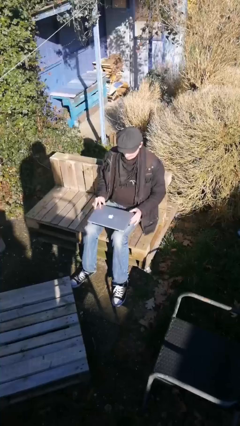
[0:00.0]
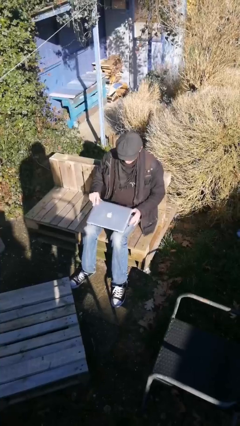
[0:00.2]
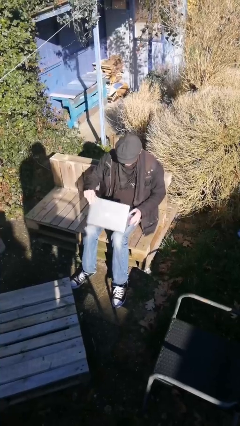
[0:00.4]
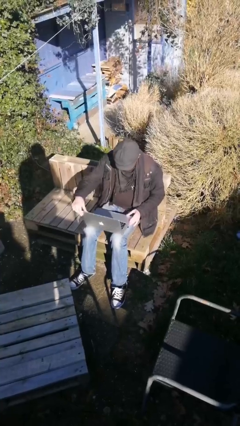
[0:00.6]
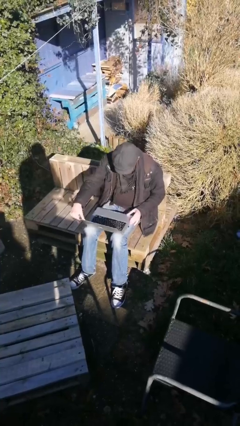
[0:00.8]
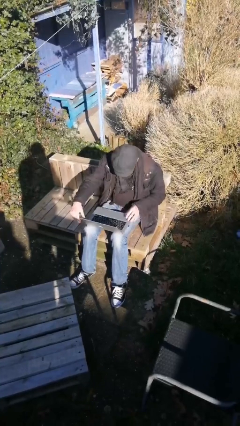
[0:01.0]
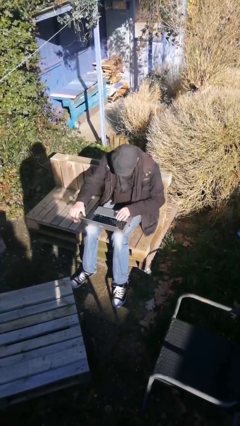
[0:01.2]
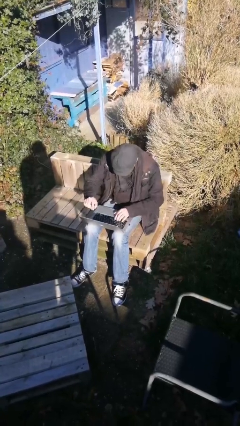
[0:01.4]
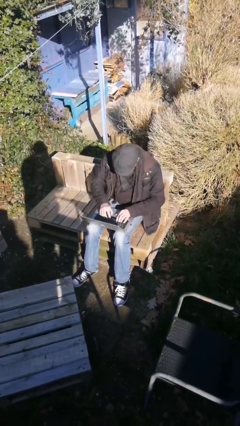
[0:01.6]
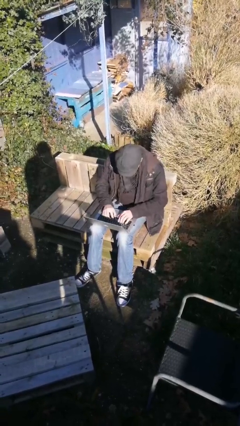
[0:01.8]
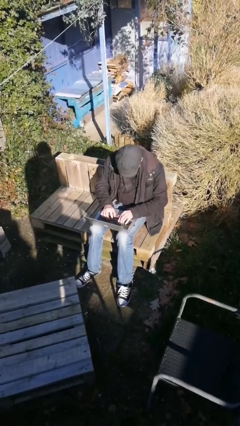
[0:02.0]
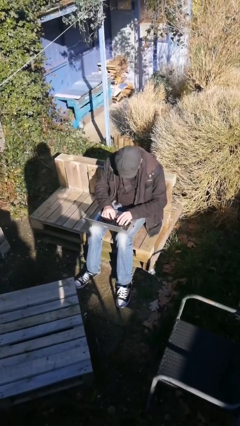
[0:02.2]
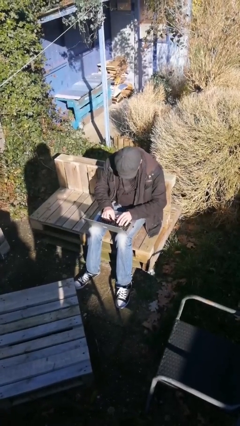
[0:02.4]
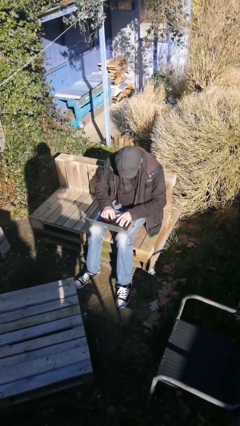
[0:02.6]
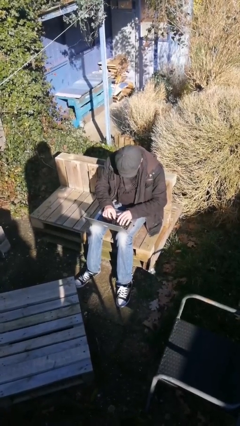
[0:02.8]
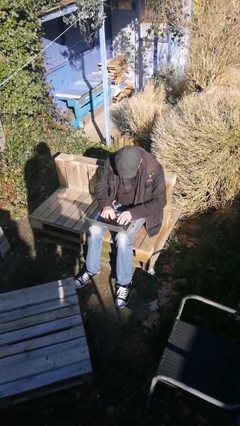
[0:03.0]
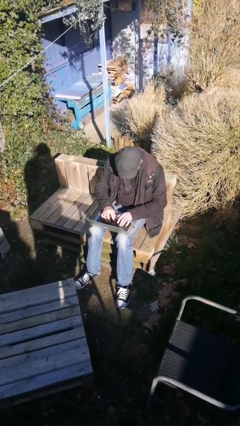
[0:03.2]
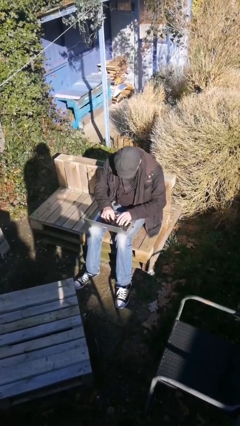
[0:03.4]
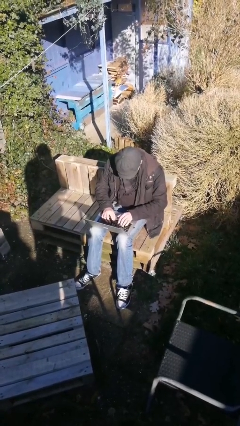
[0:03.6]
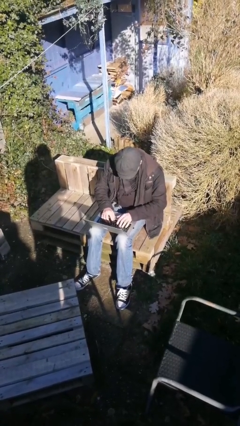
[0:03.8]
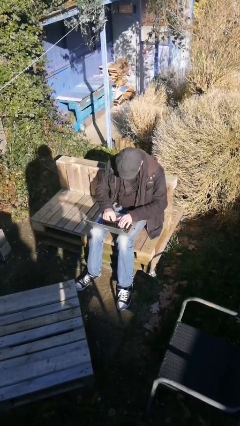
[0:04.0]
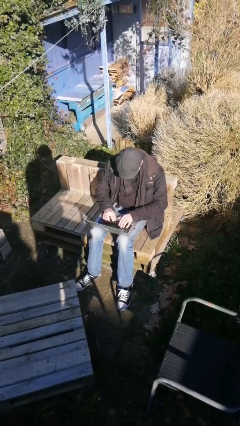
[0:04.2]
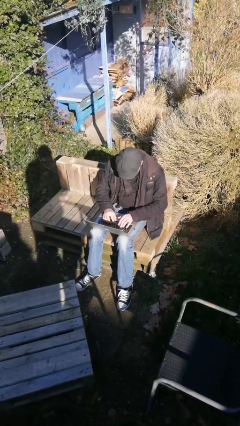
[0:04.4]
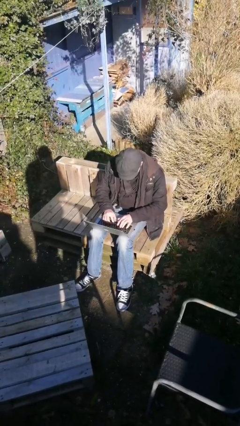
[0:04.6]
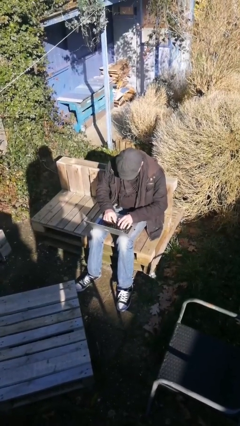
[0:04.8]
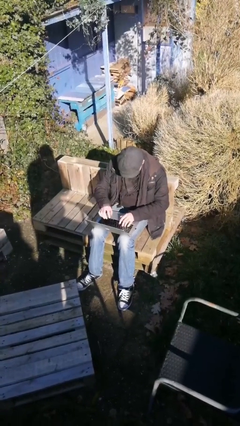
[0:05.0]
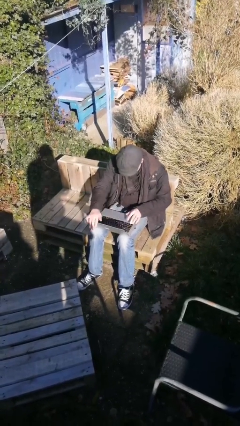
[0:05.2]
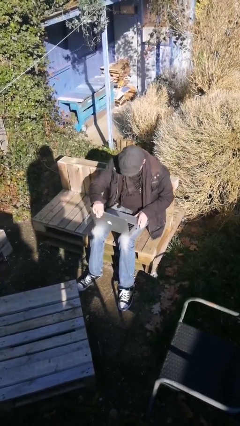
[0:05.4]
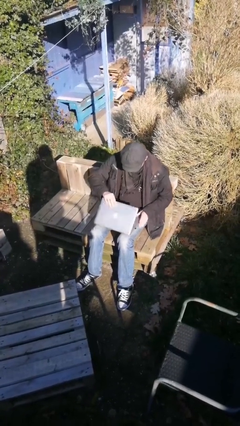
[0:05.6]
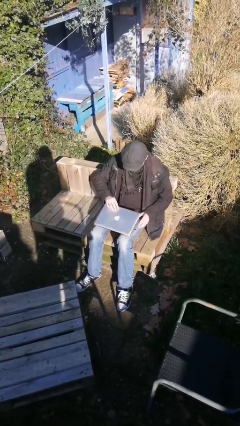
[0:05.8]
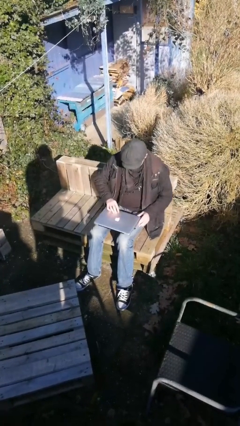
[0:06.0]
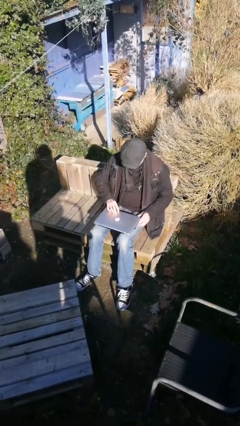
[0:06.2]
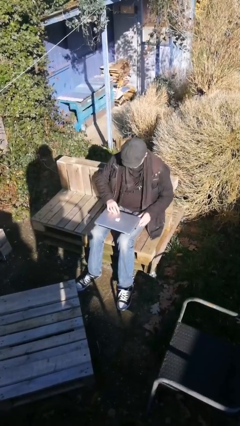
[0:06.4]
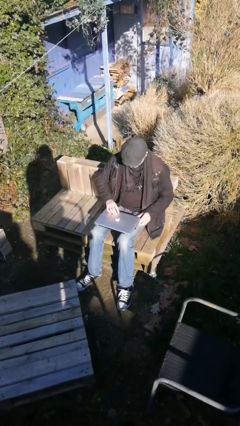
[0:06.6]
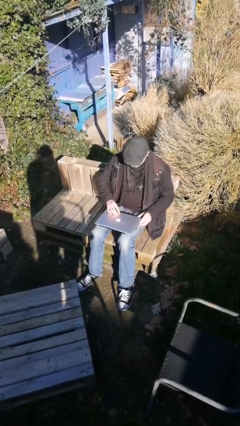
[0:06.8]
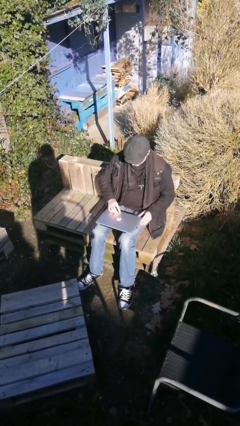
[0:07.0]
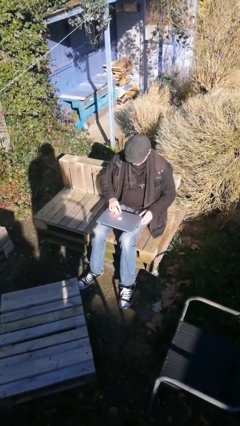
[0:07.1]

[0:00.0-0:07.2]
person interacts with laptop

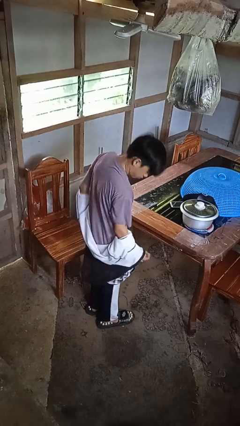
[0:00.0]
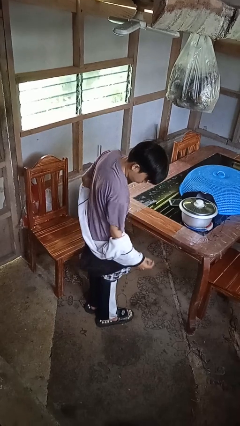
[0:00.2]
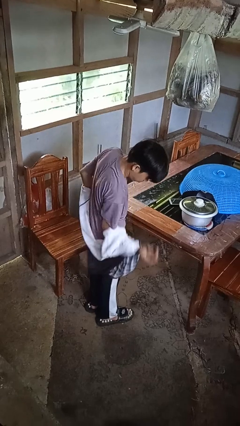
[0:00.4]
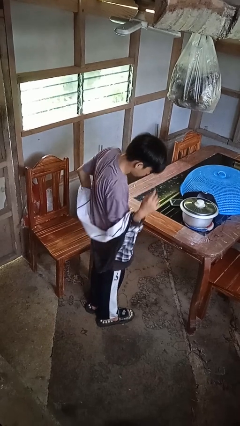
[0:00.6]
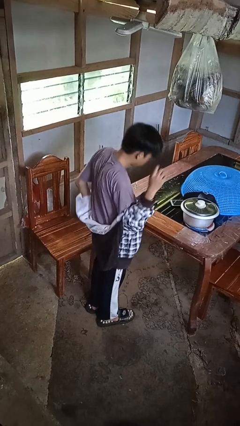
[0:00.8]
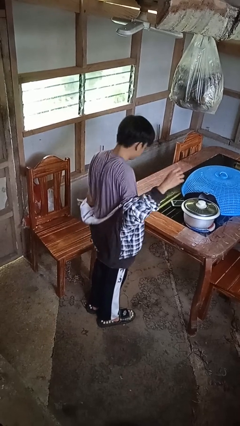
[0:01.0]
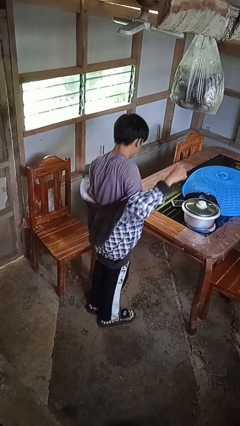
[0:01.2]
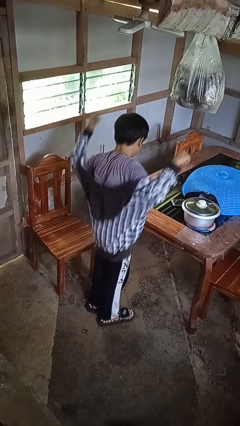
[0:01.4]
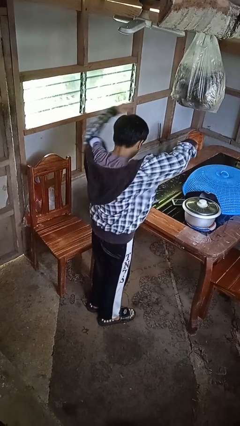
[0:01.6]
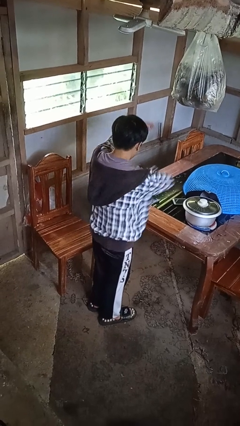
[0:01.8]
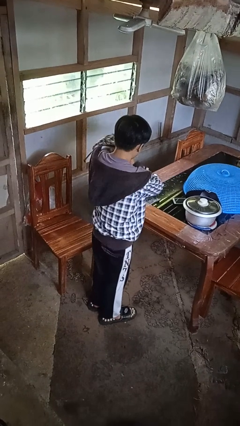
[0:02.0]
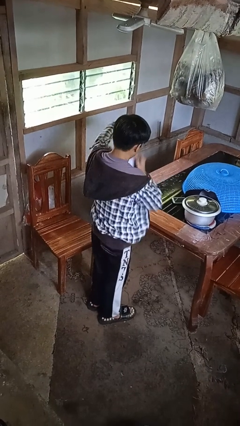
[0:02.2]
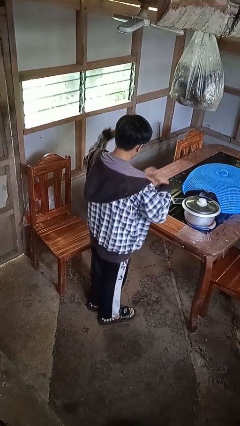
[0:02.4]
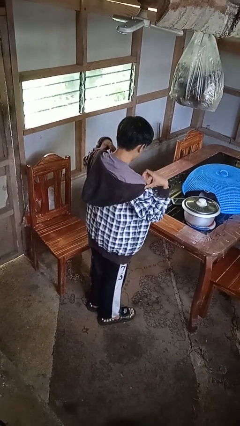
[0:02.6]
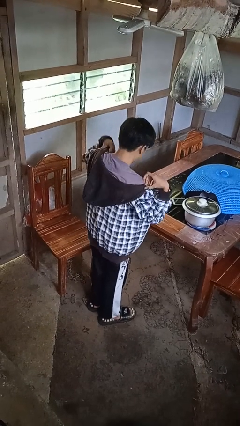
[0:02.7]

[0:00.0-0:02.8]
person puts on jacket

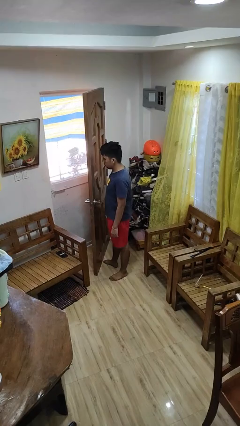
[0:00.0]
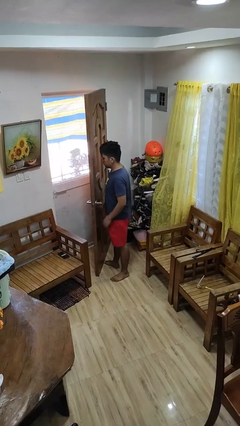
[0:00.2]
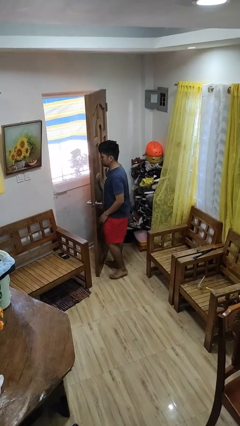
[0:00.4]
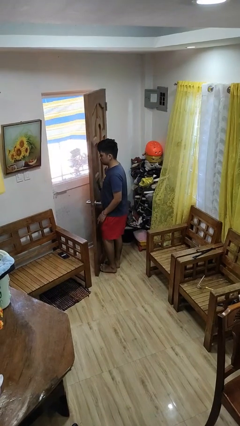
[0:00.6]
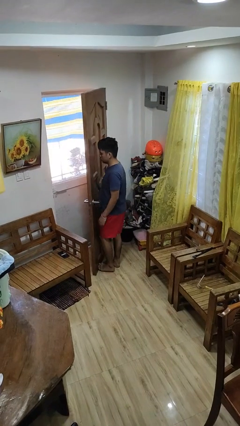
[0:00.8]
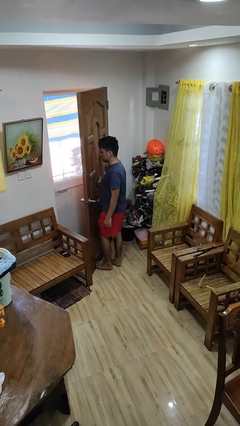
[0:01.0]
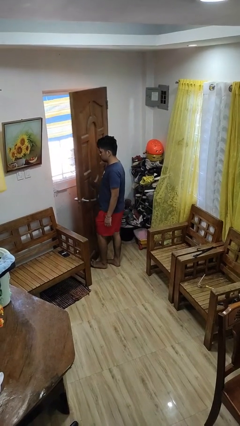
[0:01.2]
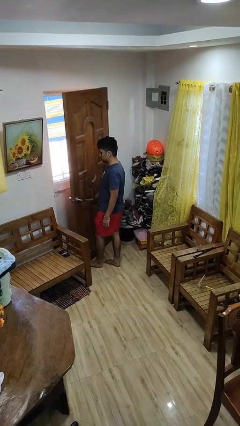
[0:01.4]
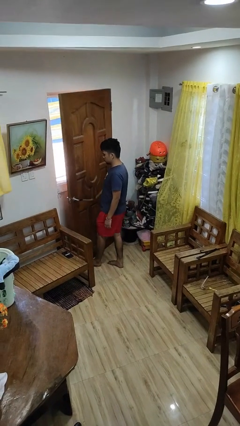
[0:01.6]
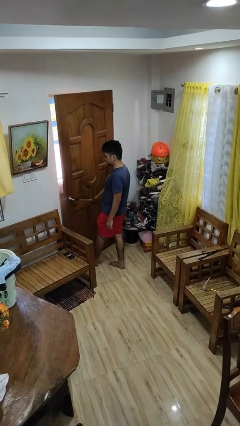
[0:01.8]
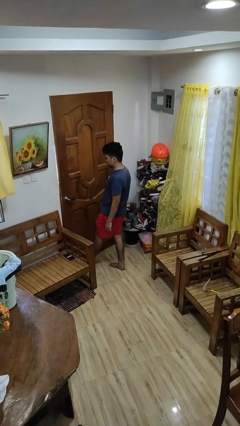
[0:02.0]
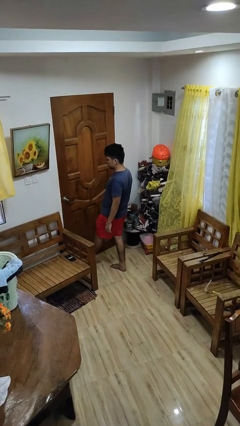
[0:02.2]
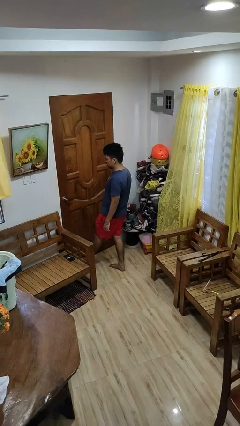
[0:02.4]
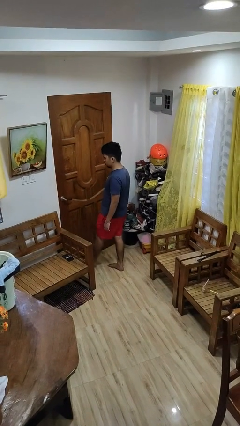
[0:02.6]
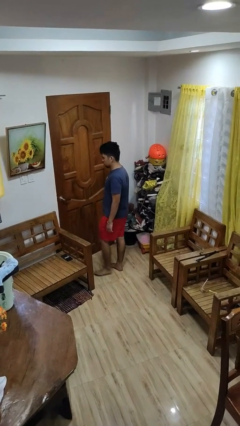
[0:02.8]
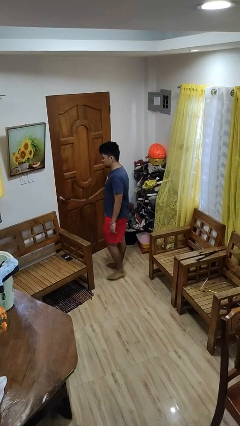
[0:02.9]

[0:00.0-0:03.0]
person closes door with foot

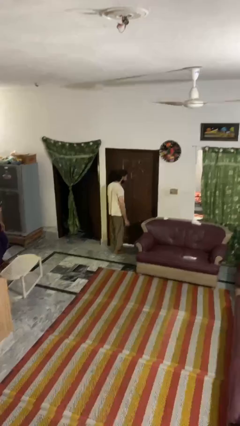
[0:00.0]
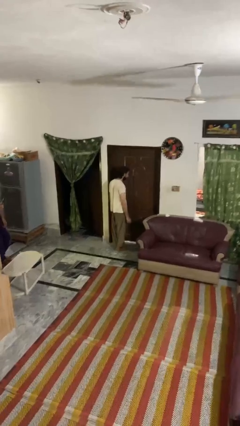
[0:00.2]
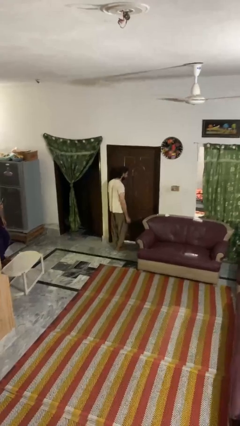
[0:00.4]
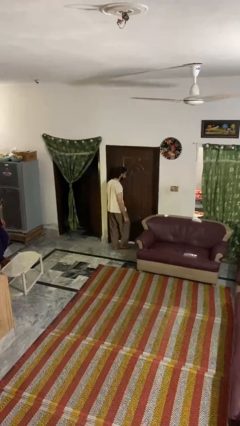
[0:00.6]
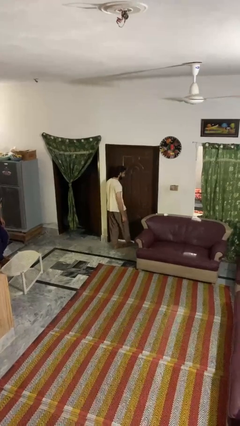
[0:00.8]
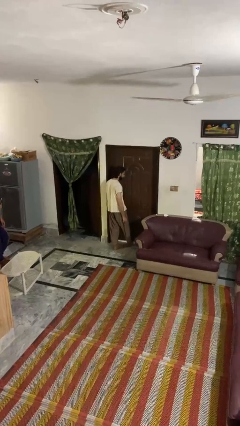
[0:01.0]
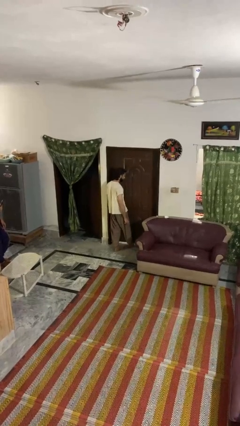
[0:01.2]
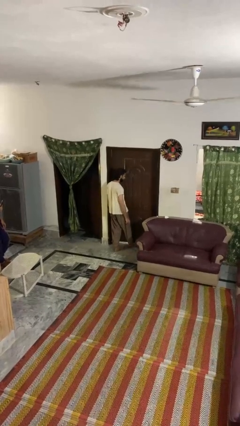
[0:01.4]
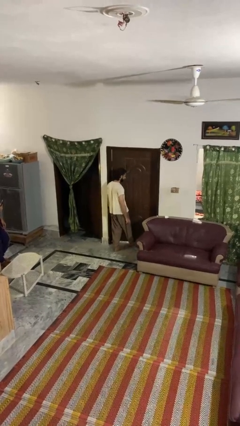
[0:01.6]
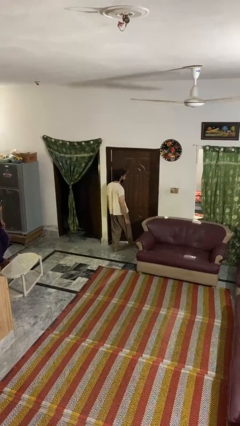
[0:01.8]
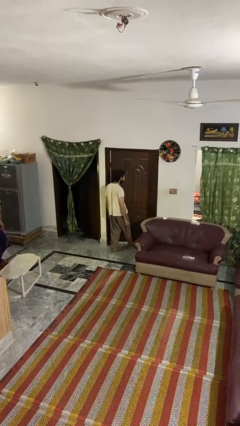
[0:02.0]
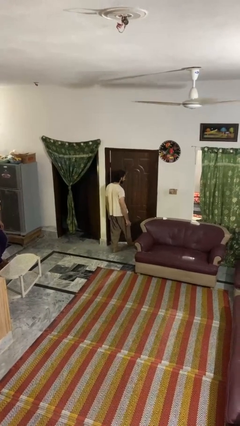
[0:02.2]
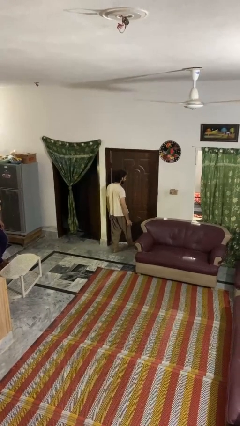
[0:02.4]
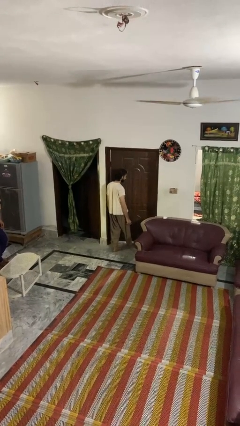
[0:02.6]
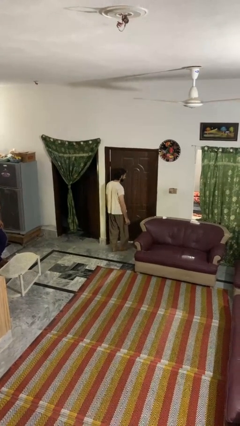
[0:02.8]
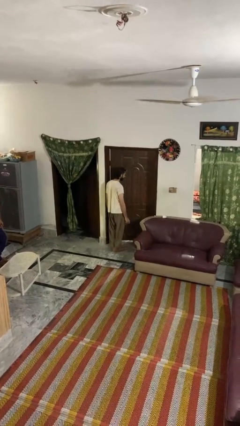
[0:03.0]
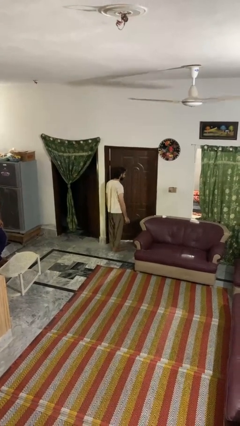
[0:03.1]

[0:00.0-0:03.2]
person opens facility door

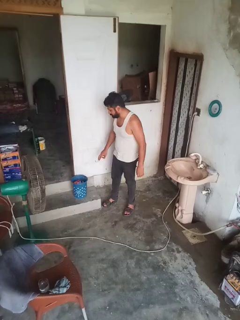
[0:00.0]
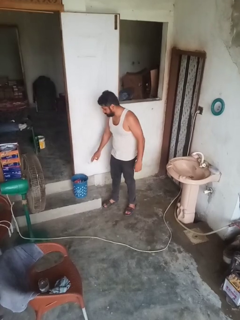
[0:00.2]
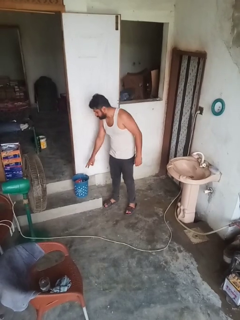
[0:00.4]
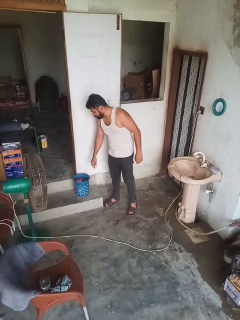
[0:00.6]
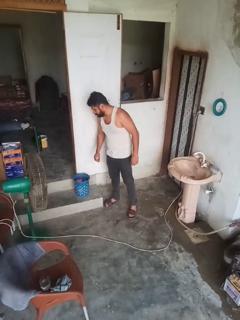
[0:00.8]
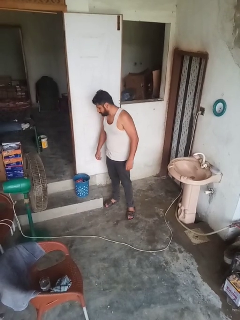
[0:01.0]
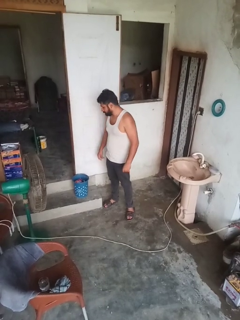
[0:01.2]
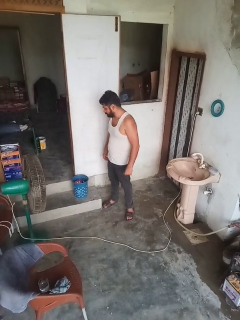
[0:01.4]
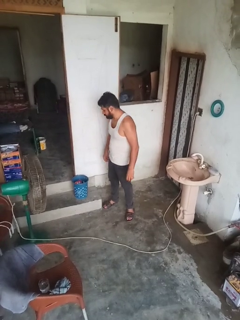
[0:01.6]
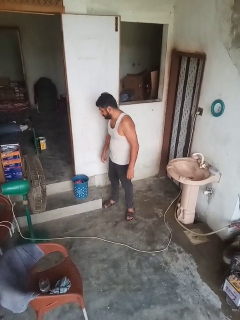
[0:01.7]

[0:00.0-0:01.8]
person discards trash
